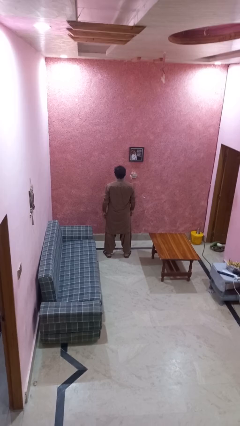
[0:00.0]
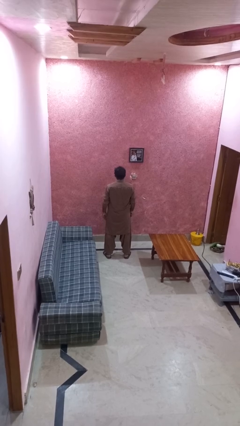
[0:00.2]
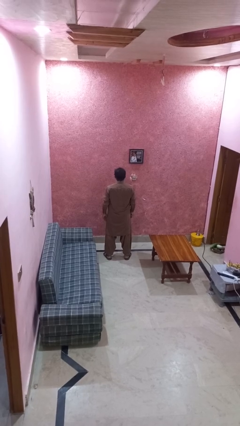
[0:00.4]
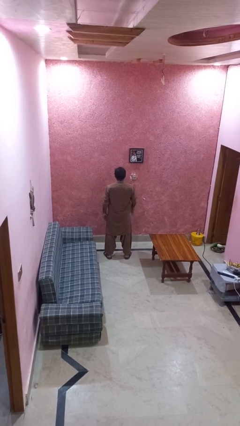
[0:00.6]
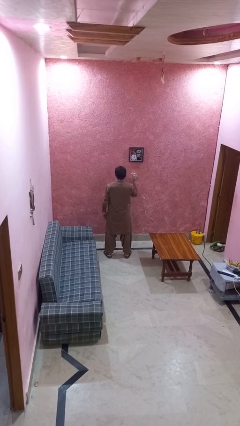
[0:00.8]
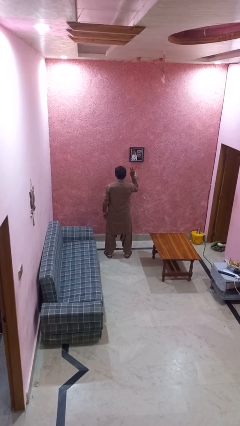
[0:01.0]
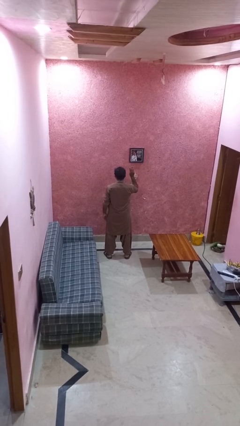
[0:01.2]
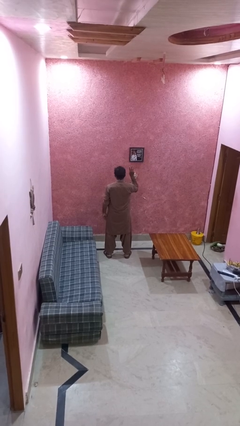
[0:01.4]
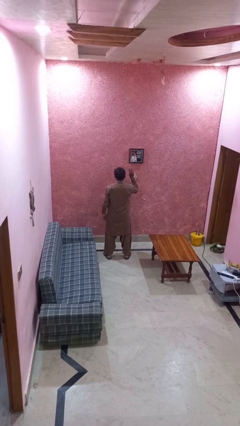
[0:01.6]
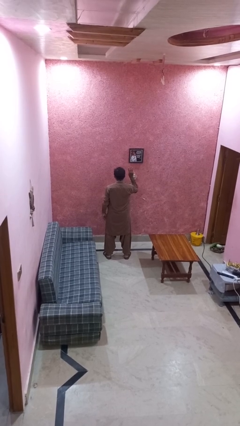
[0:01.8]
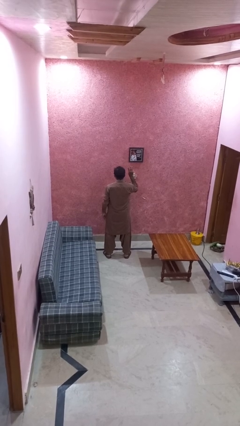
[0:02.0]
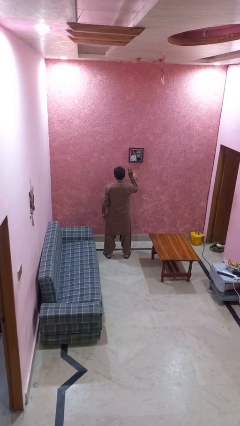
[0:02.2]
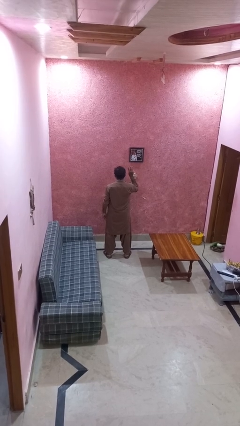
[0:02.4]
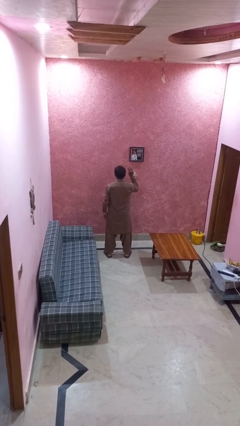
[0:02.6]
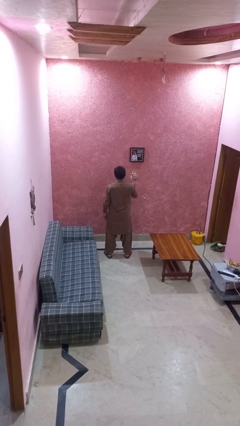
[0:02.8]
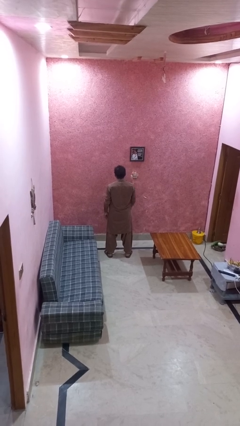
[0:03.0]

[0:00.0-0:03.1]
person gestures number three

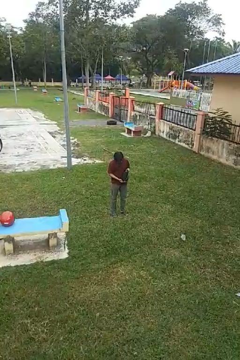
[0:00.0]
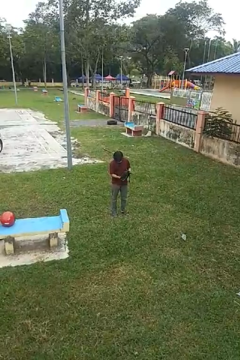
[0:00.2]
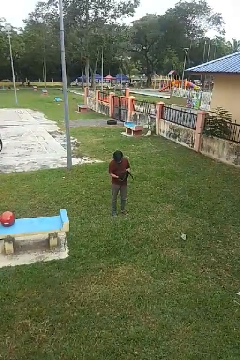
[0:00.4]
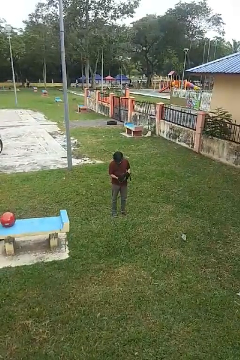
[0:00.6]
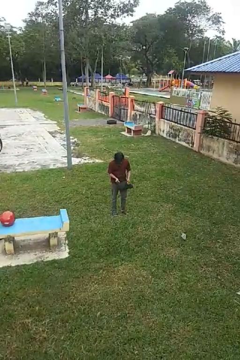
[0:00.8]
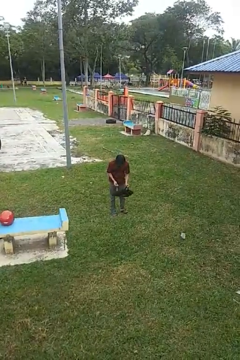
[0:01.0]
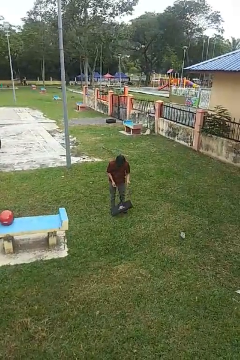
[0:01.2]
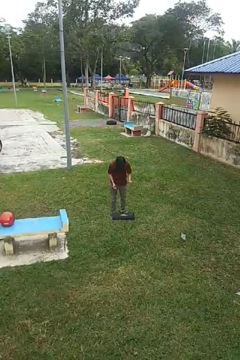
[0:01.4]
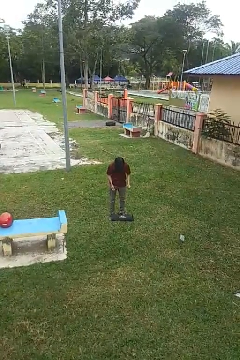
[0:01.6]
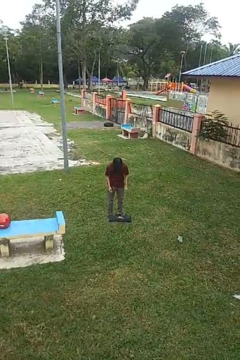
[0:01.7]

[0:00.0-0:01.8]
person drops object

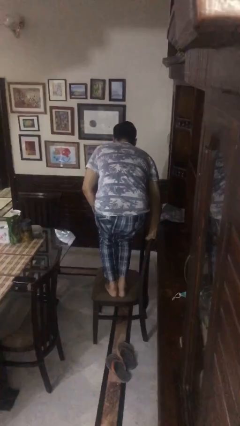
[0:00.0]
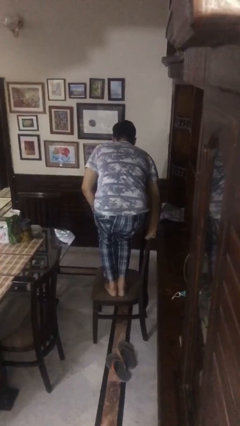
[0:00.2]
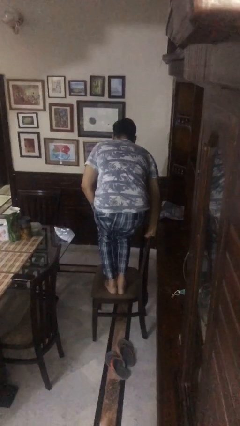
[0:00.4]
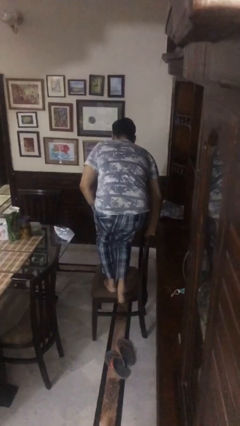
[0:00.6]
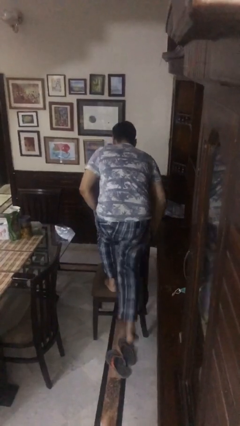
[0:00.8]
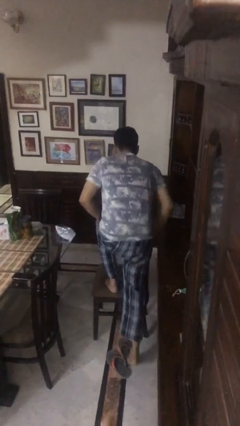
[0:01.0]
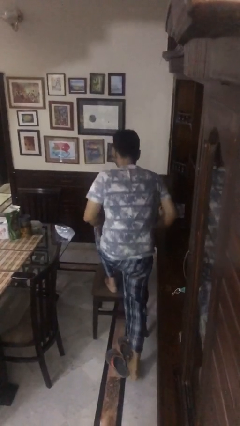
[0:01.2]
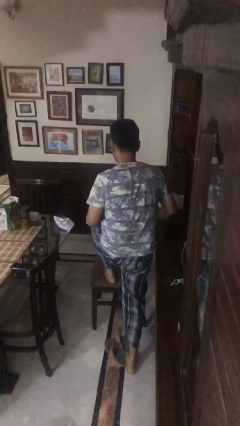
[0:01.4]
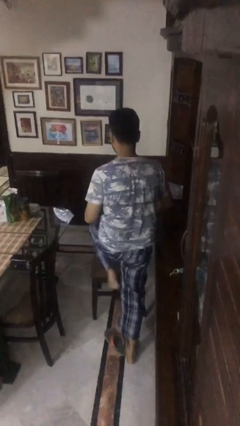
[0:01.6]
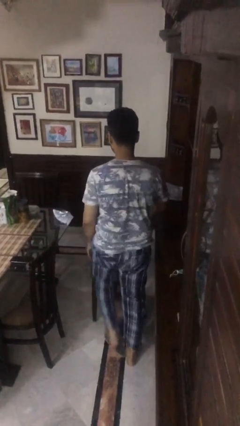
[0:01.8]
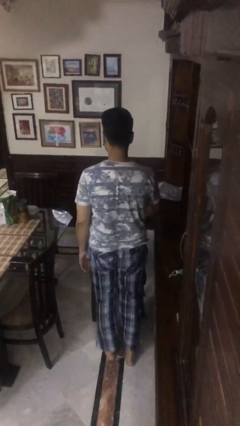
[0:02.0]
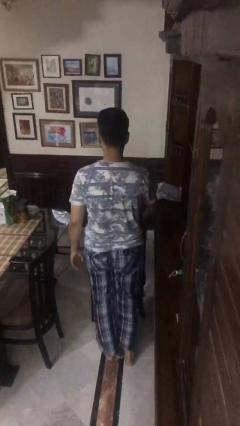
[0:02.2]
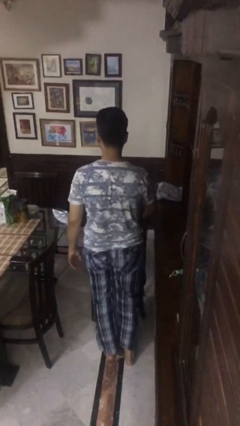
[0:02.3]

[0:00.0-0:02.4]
person climbs off chair

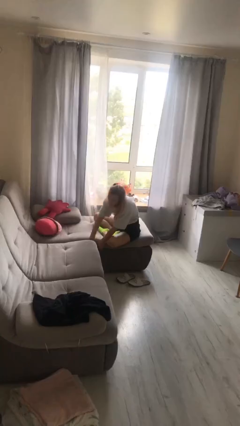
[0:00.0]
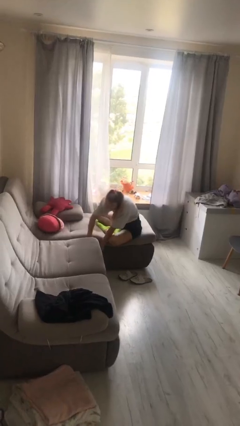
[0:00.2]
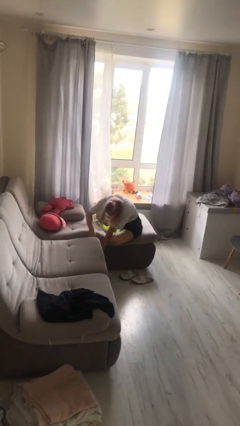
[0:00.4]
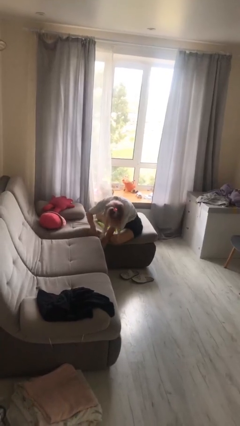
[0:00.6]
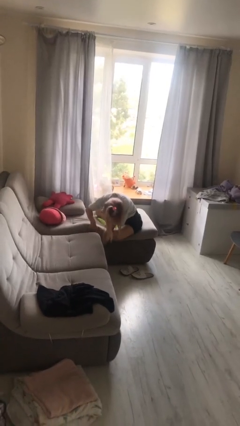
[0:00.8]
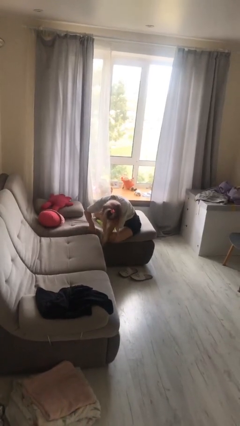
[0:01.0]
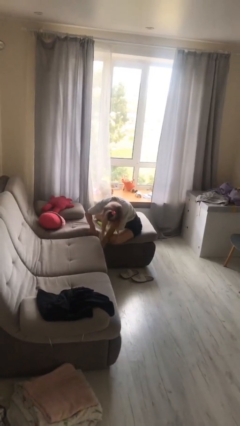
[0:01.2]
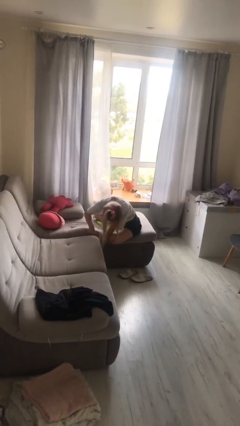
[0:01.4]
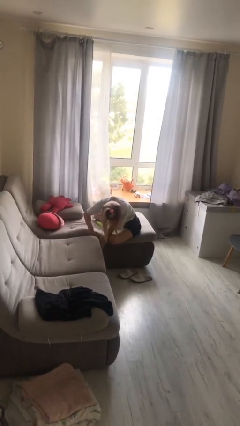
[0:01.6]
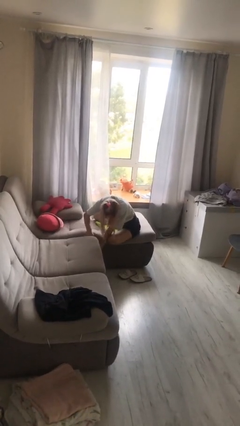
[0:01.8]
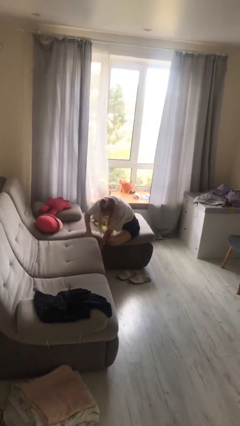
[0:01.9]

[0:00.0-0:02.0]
person searches in couch

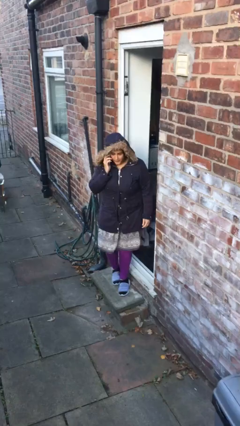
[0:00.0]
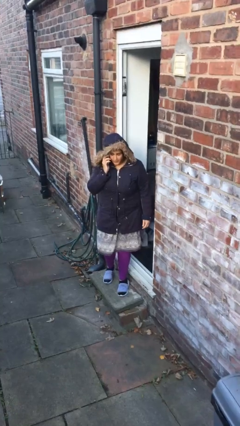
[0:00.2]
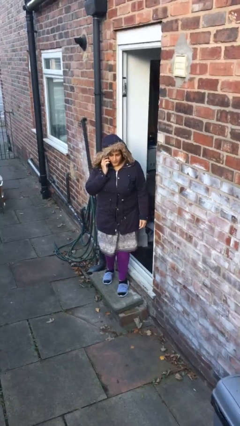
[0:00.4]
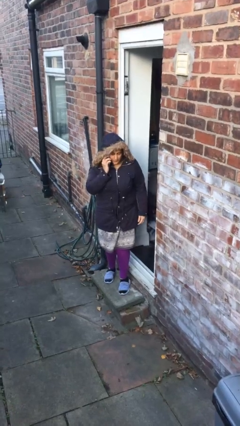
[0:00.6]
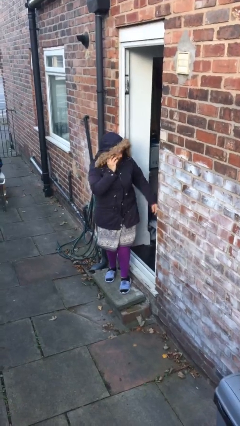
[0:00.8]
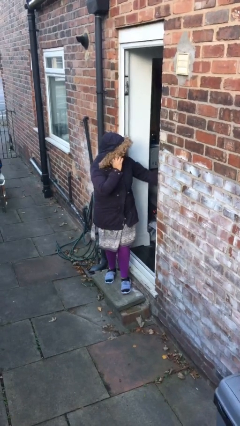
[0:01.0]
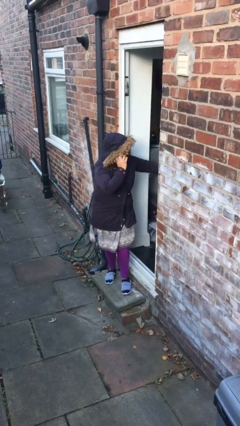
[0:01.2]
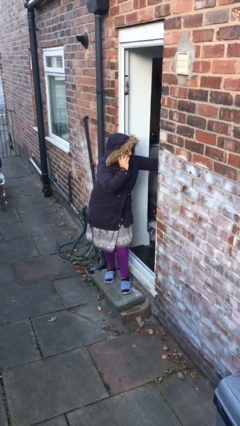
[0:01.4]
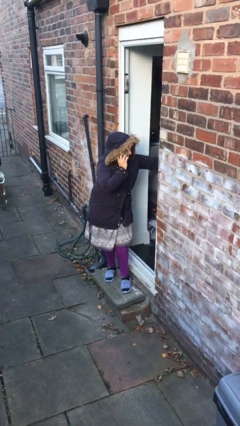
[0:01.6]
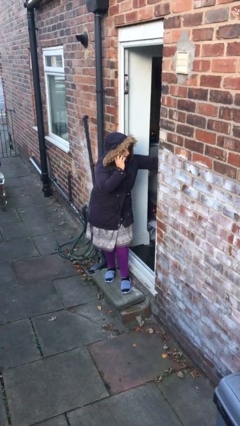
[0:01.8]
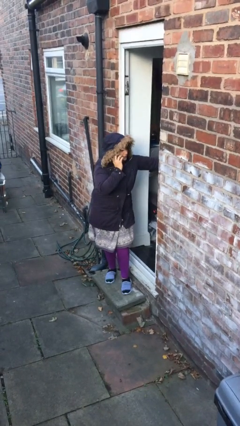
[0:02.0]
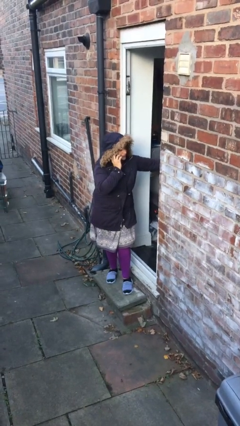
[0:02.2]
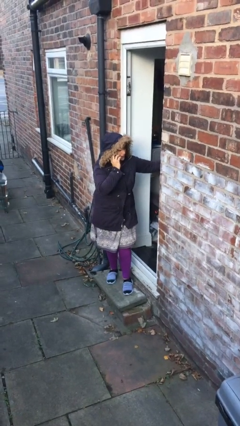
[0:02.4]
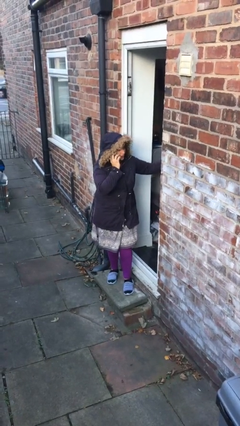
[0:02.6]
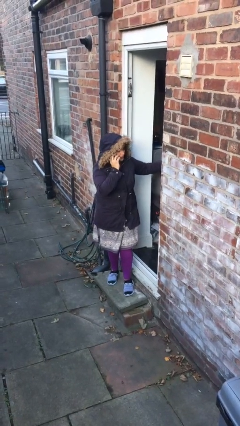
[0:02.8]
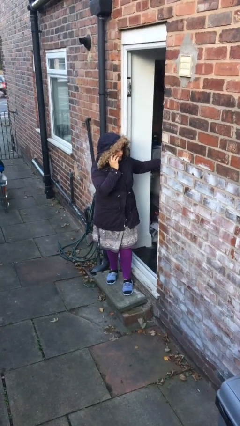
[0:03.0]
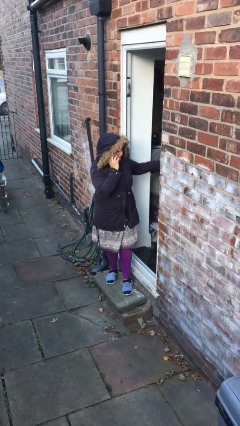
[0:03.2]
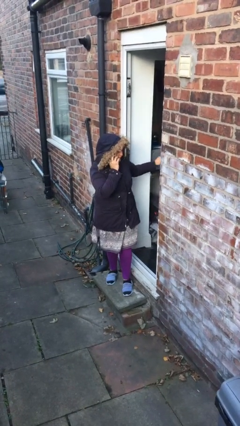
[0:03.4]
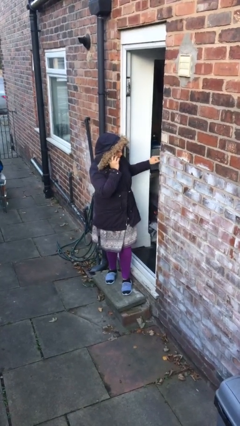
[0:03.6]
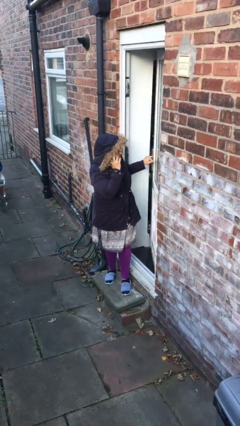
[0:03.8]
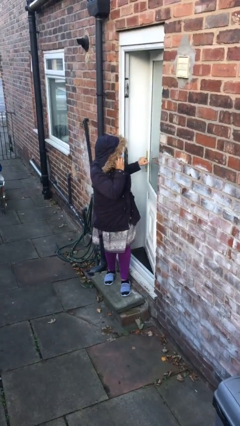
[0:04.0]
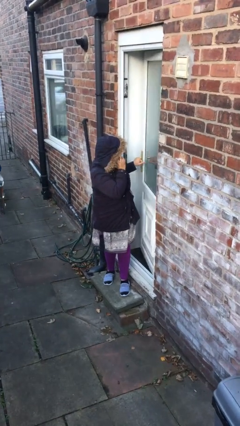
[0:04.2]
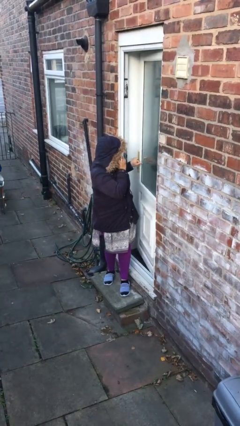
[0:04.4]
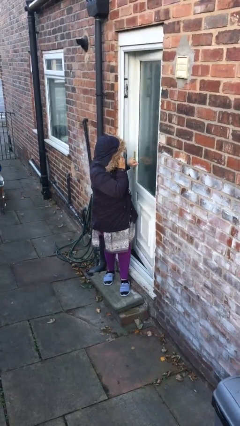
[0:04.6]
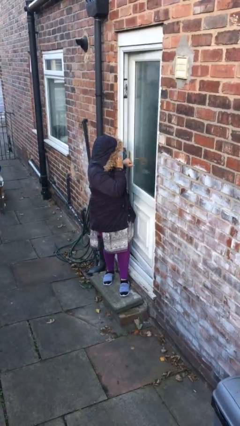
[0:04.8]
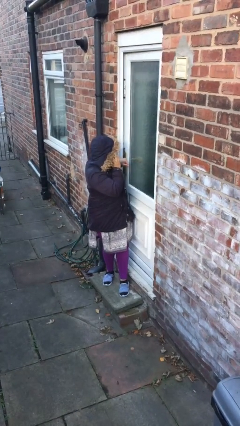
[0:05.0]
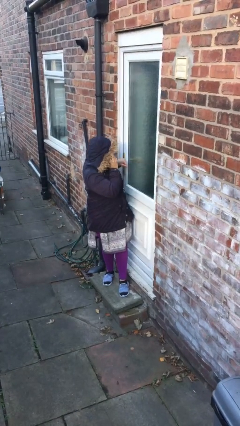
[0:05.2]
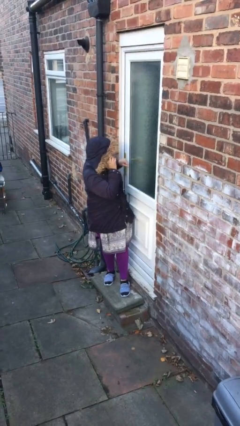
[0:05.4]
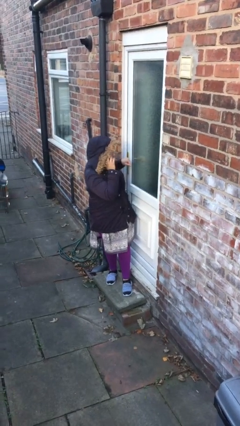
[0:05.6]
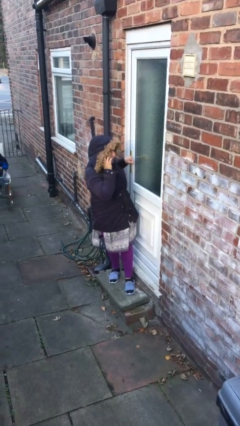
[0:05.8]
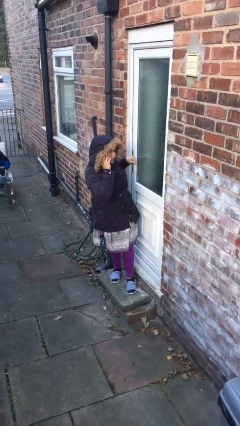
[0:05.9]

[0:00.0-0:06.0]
person closes facility door

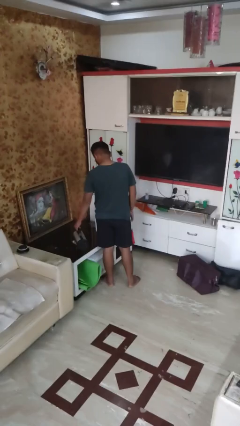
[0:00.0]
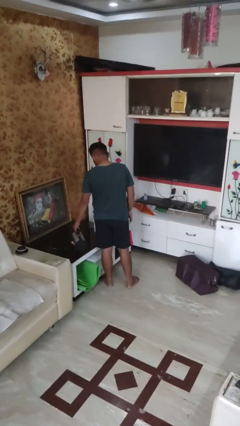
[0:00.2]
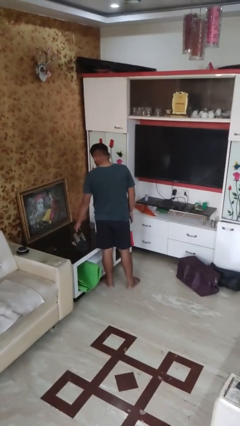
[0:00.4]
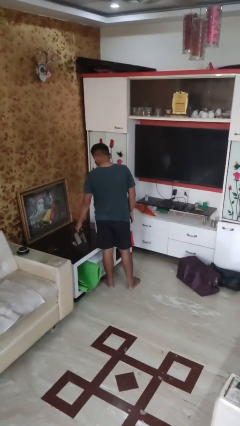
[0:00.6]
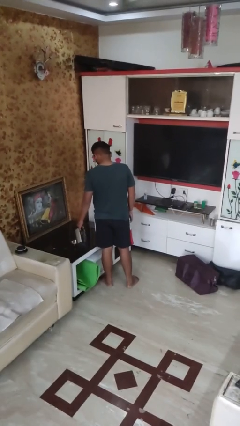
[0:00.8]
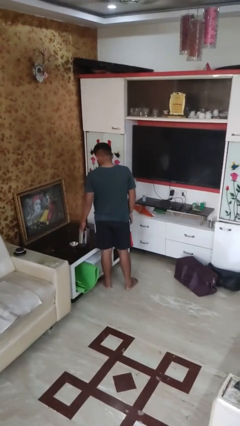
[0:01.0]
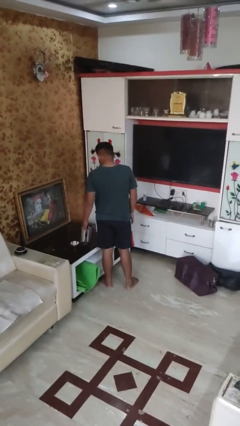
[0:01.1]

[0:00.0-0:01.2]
person pours into bowl

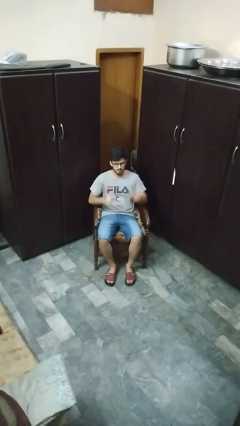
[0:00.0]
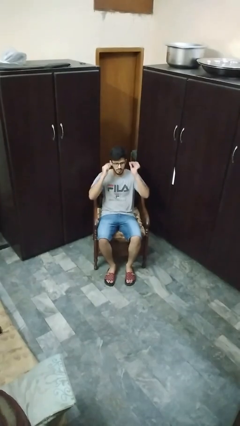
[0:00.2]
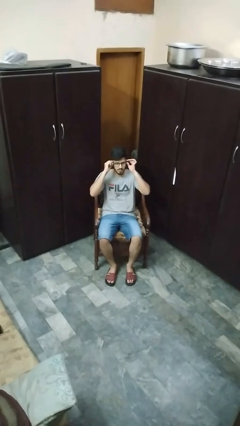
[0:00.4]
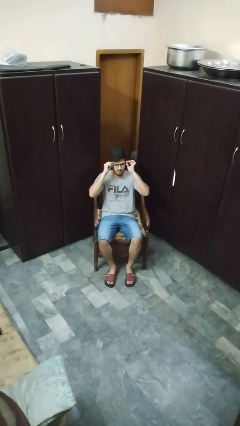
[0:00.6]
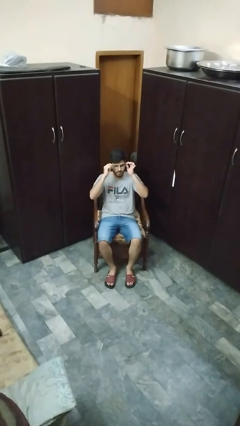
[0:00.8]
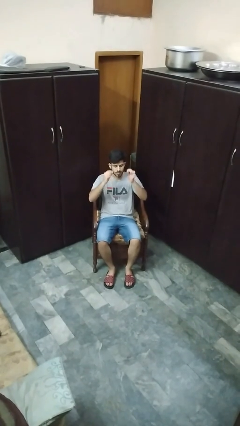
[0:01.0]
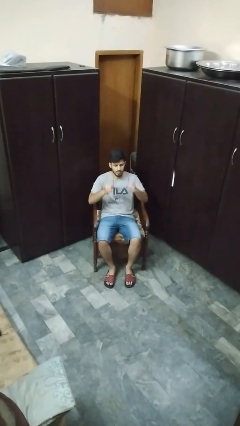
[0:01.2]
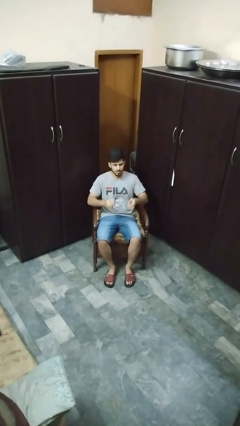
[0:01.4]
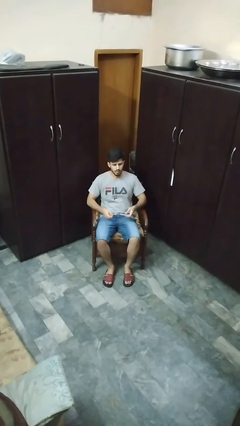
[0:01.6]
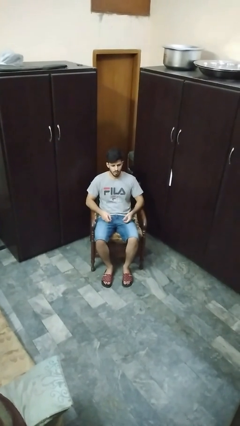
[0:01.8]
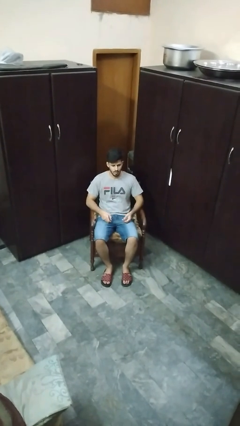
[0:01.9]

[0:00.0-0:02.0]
person takes off glasses
